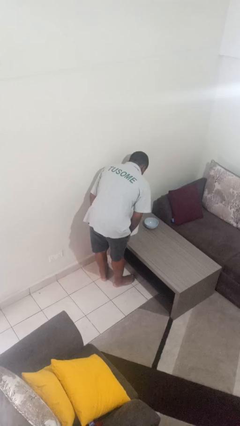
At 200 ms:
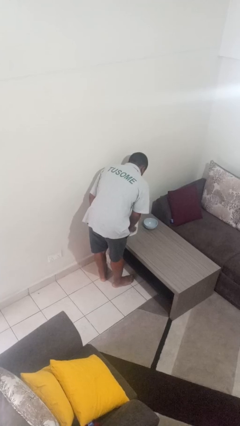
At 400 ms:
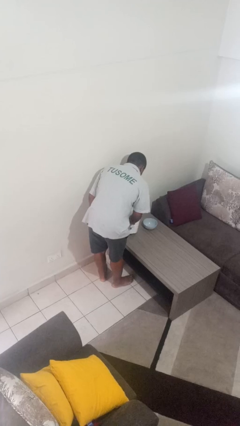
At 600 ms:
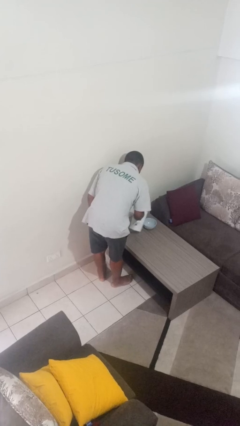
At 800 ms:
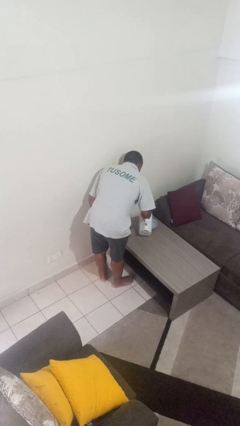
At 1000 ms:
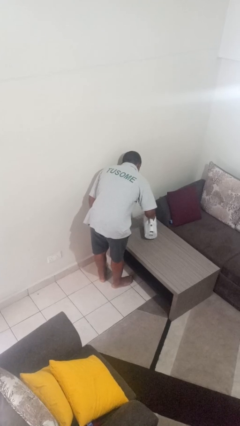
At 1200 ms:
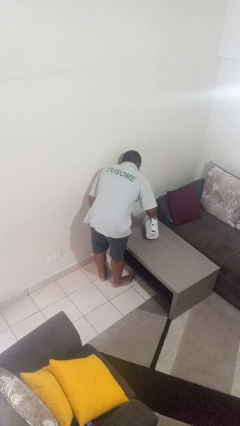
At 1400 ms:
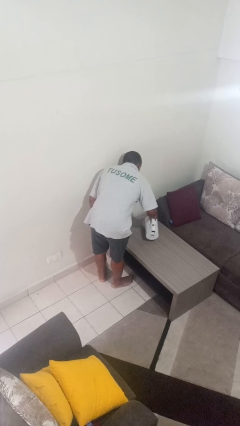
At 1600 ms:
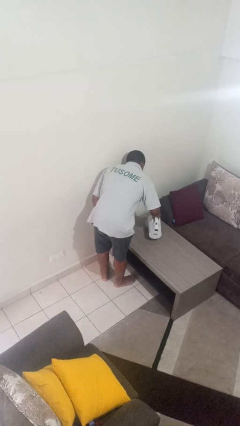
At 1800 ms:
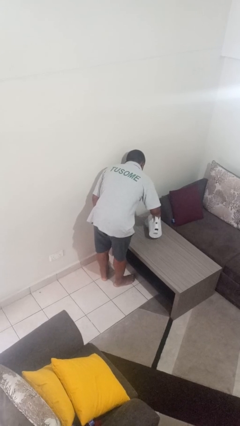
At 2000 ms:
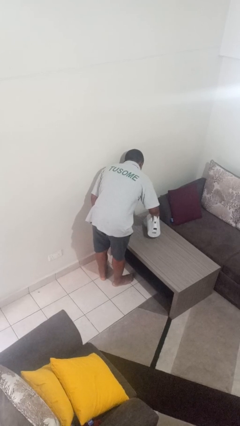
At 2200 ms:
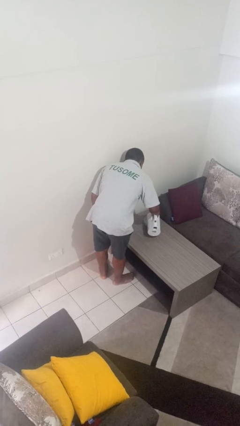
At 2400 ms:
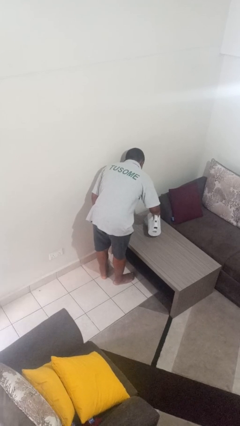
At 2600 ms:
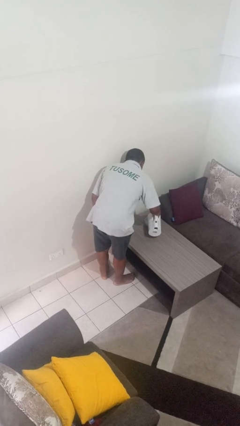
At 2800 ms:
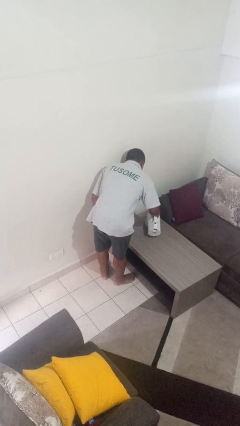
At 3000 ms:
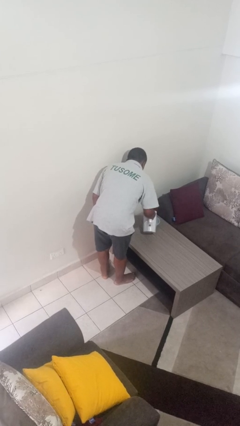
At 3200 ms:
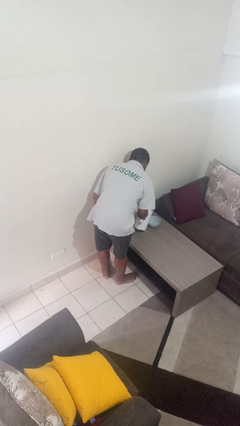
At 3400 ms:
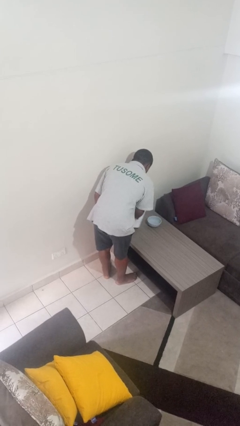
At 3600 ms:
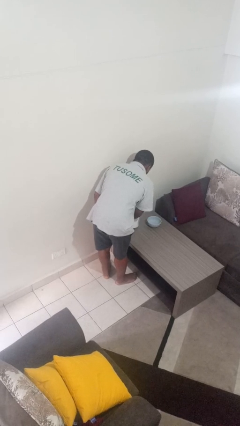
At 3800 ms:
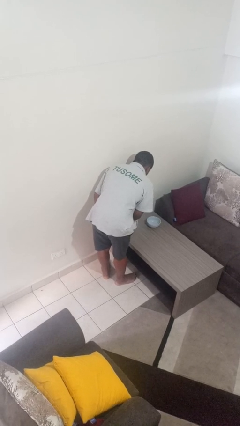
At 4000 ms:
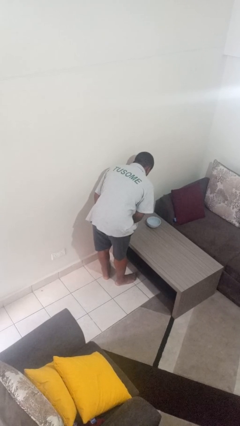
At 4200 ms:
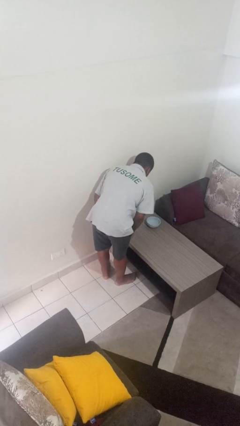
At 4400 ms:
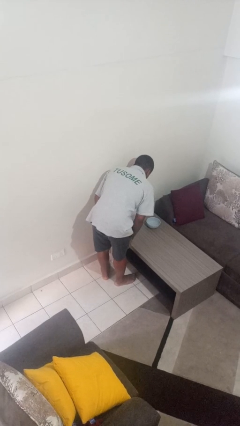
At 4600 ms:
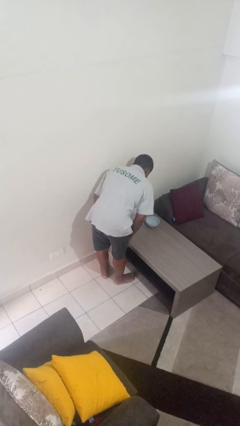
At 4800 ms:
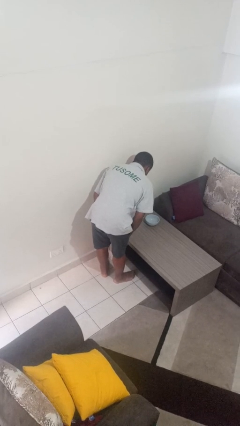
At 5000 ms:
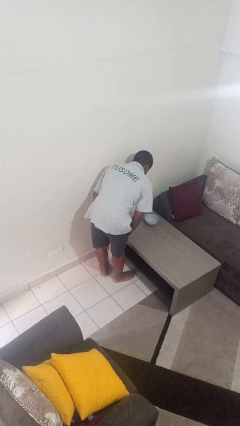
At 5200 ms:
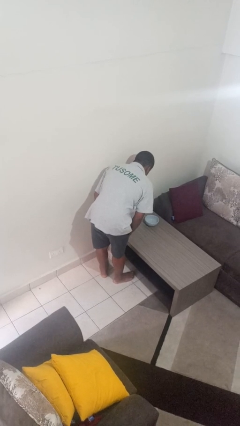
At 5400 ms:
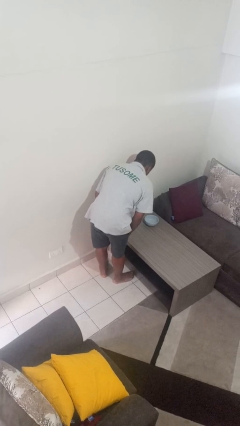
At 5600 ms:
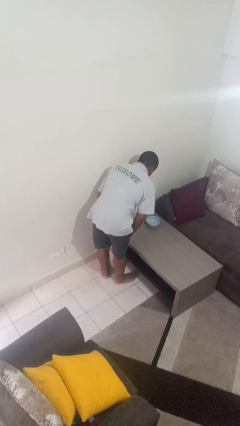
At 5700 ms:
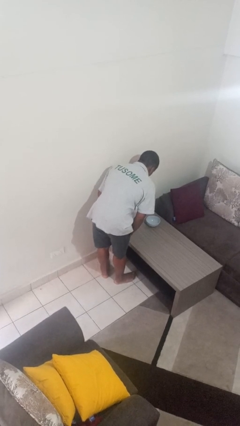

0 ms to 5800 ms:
person pours into bowl

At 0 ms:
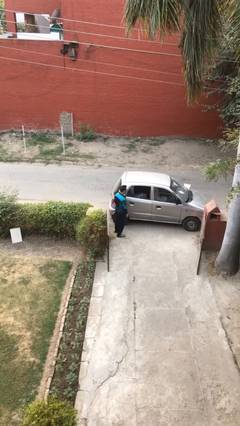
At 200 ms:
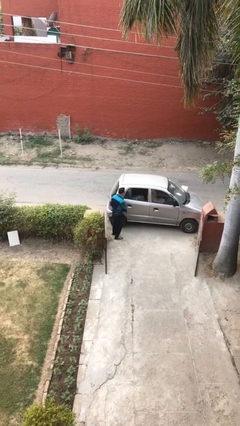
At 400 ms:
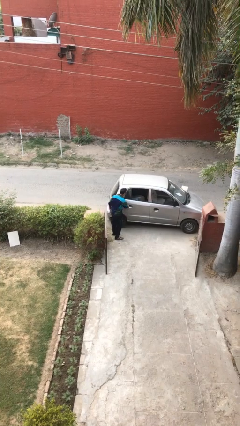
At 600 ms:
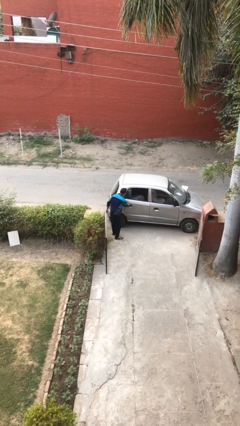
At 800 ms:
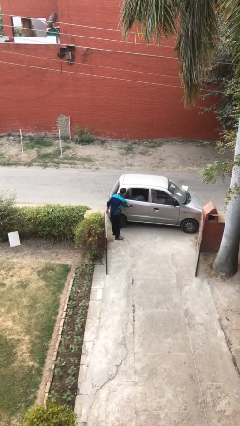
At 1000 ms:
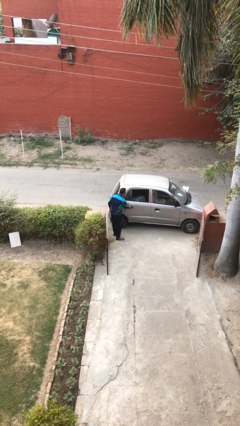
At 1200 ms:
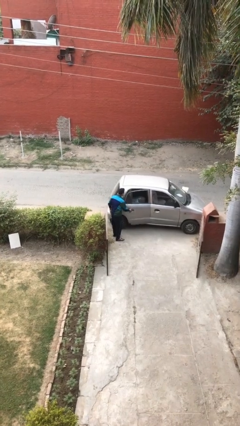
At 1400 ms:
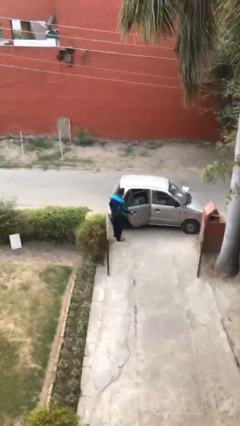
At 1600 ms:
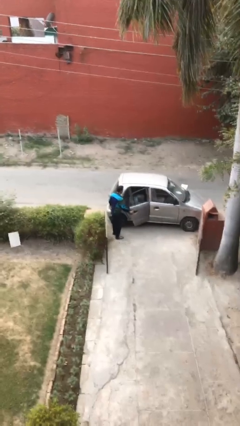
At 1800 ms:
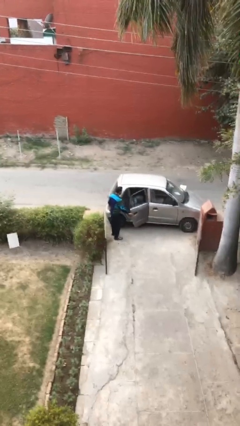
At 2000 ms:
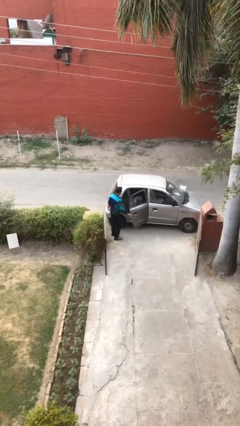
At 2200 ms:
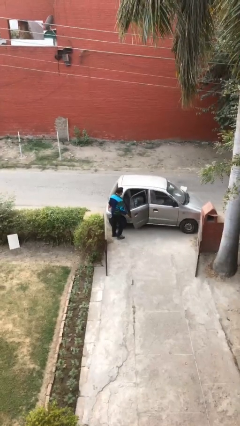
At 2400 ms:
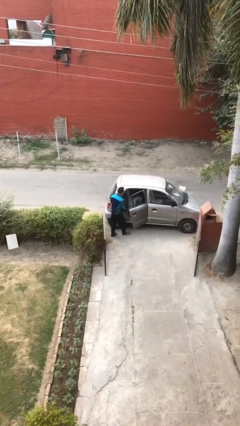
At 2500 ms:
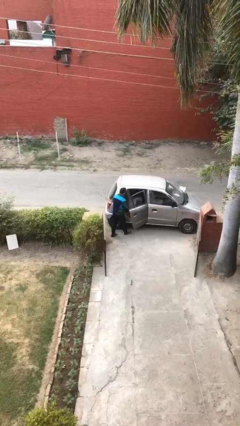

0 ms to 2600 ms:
person opens car door

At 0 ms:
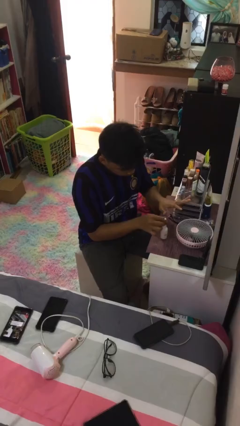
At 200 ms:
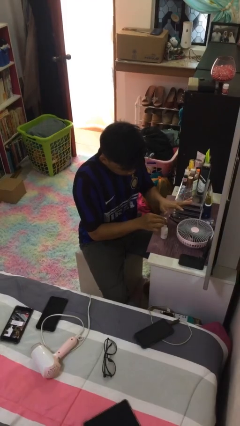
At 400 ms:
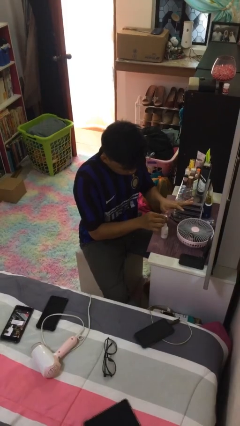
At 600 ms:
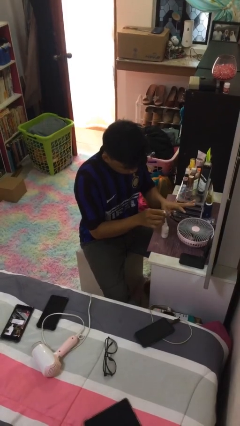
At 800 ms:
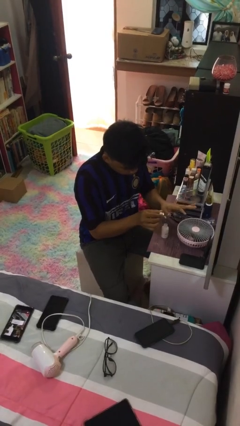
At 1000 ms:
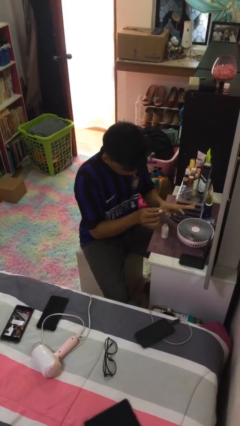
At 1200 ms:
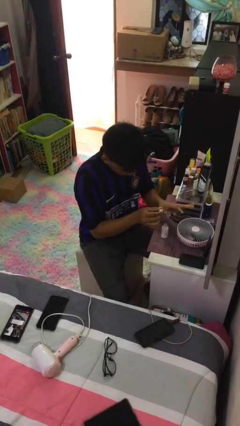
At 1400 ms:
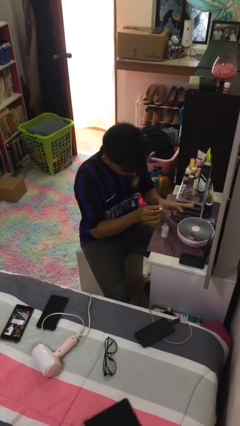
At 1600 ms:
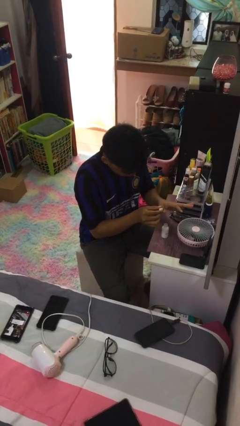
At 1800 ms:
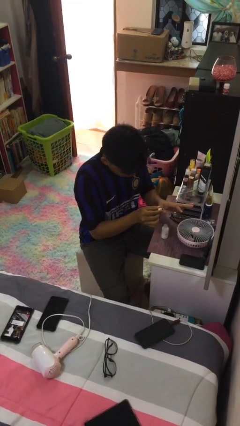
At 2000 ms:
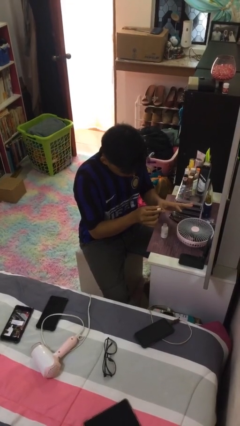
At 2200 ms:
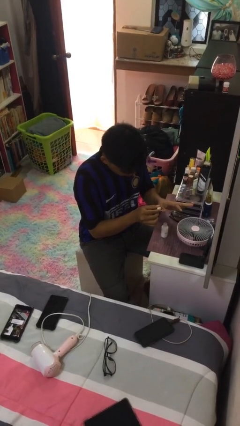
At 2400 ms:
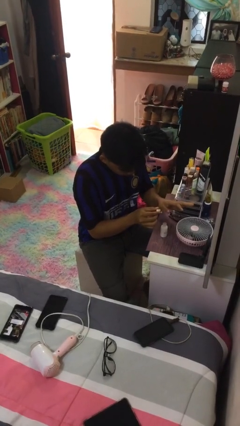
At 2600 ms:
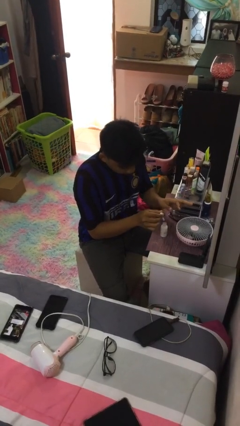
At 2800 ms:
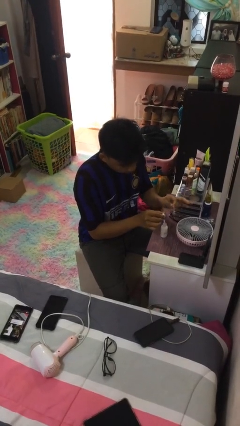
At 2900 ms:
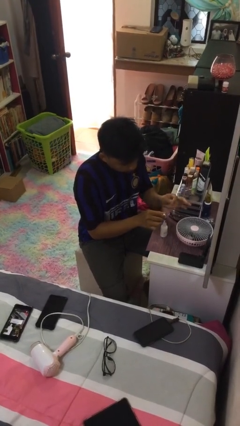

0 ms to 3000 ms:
person paints fingernails

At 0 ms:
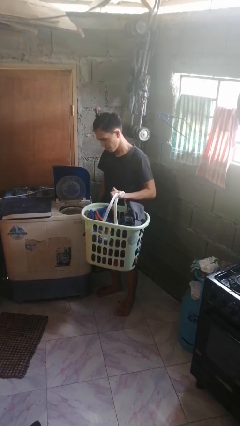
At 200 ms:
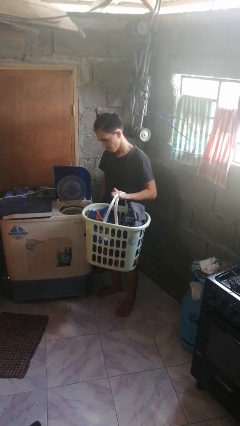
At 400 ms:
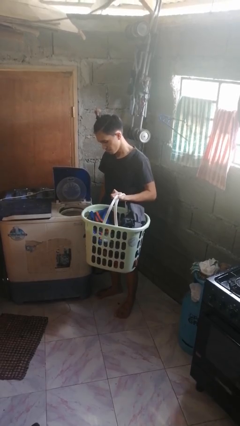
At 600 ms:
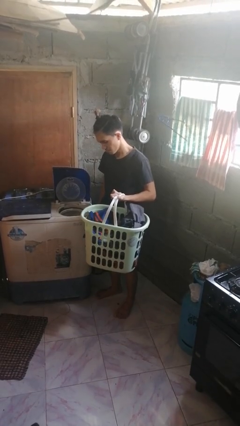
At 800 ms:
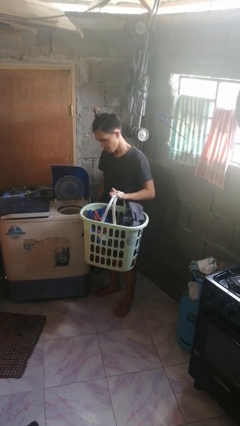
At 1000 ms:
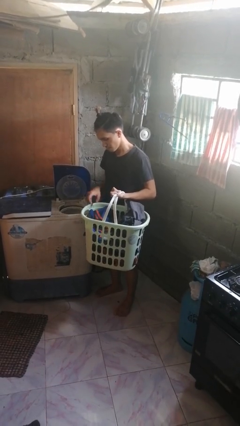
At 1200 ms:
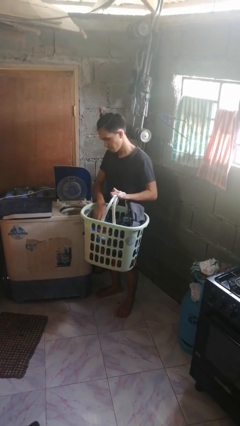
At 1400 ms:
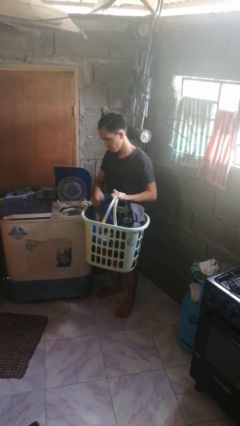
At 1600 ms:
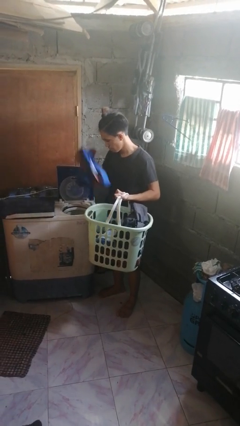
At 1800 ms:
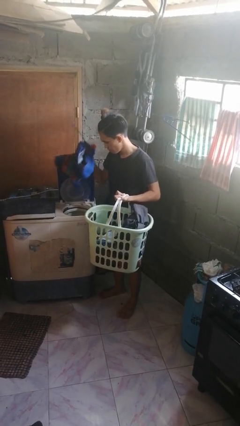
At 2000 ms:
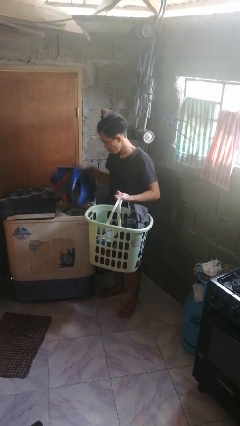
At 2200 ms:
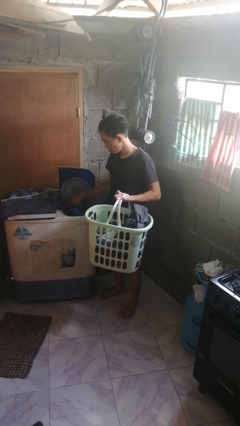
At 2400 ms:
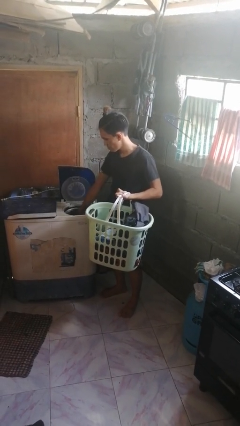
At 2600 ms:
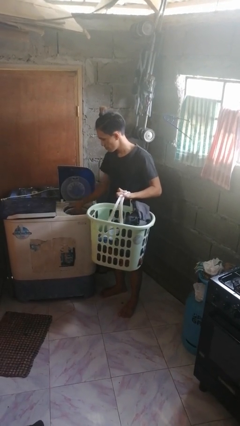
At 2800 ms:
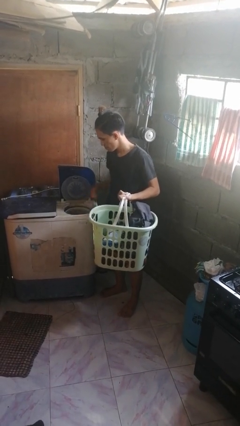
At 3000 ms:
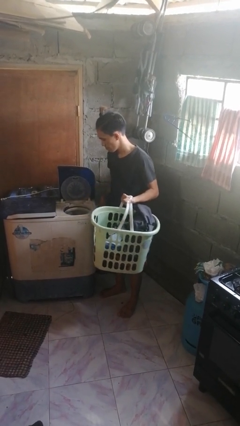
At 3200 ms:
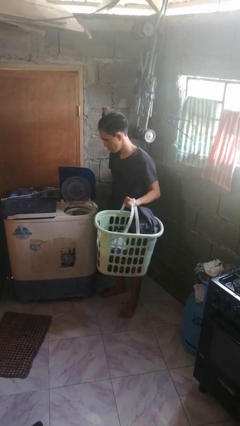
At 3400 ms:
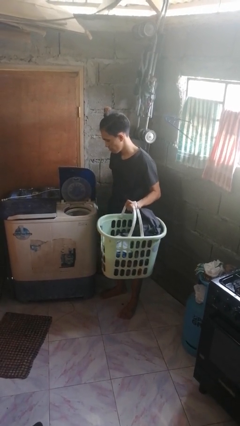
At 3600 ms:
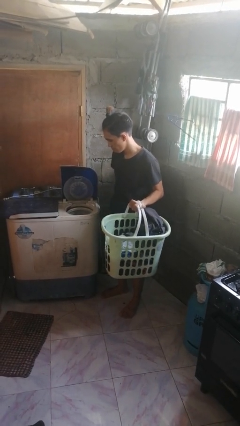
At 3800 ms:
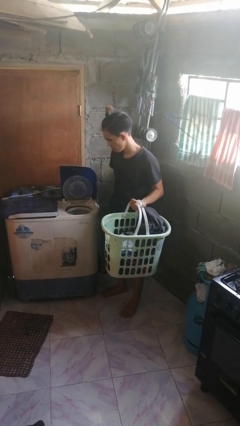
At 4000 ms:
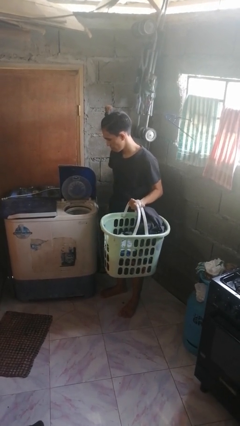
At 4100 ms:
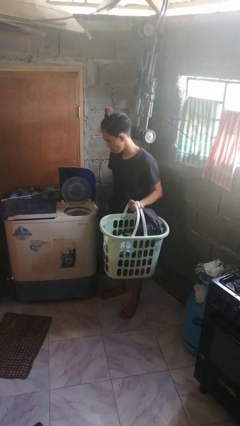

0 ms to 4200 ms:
person loads dryer

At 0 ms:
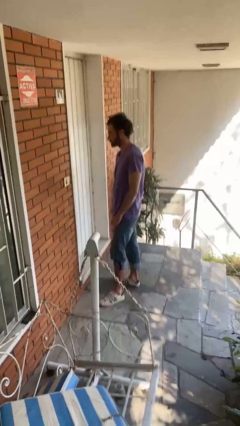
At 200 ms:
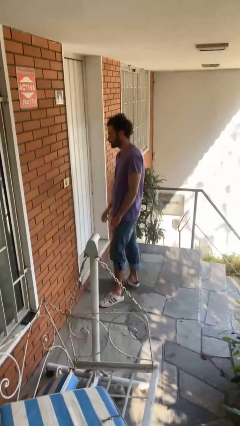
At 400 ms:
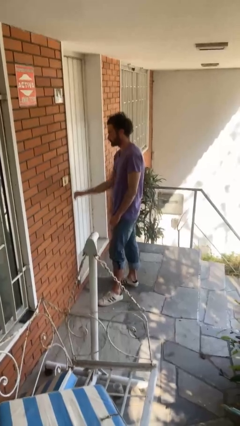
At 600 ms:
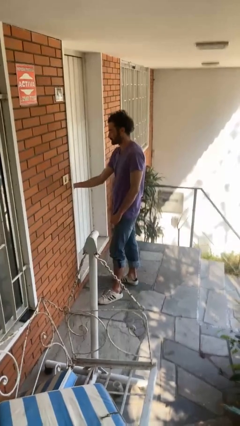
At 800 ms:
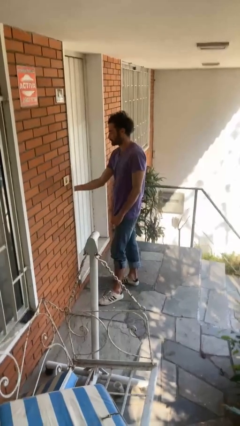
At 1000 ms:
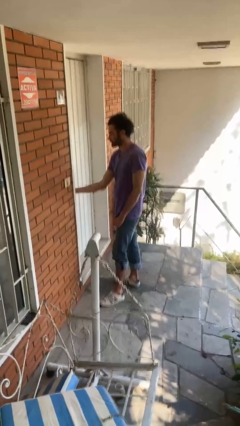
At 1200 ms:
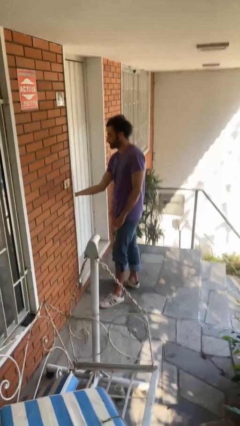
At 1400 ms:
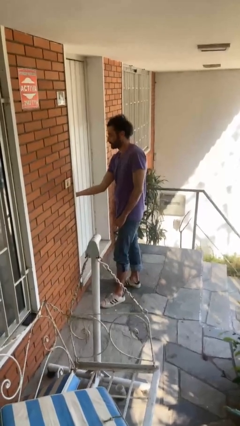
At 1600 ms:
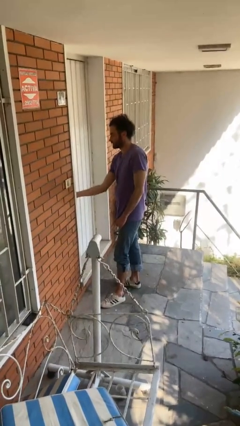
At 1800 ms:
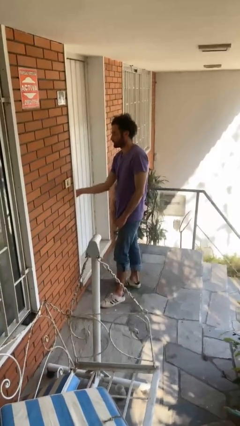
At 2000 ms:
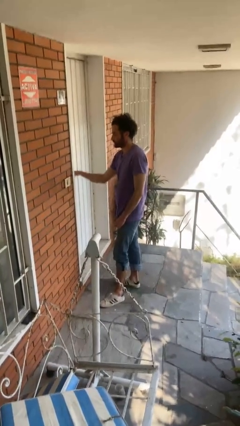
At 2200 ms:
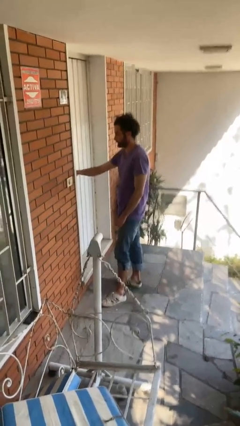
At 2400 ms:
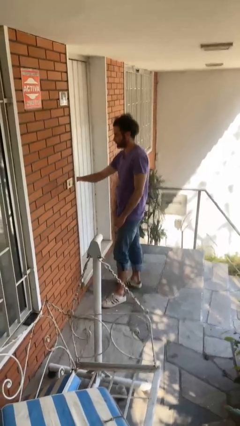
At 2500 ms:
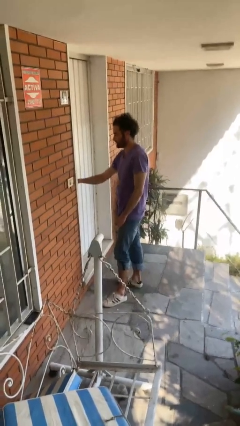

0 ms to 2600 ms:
person unlocks door with keys
